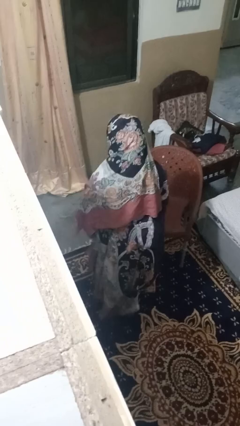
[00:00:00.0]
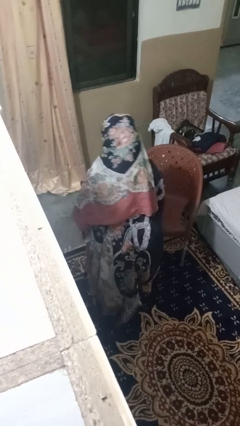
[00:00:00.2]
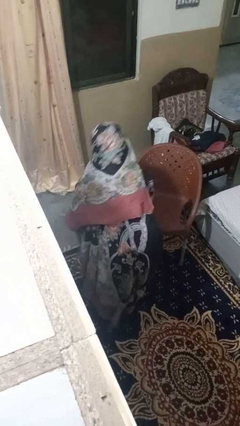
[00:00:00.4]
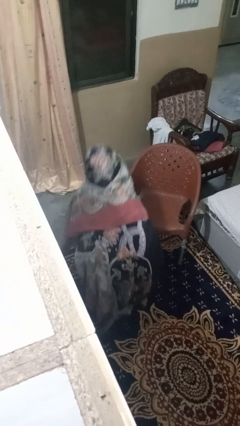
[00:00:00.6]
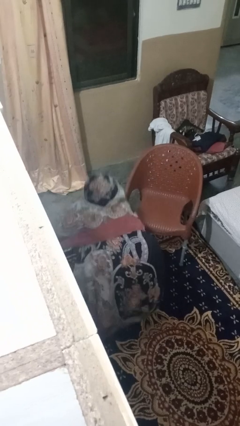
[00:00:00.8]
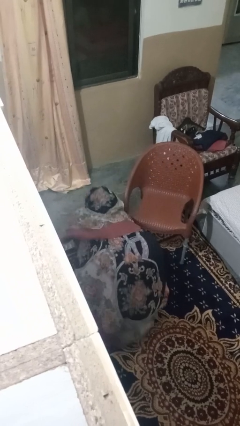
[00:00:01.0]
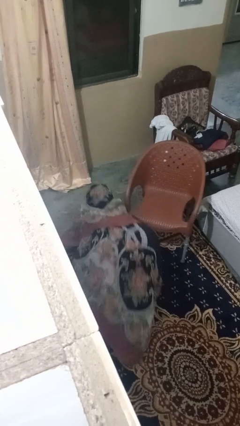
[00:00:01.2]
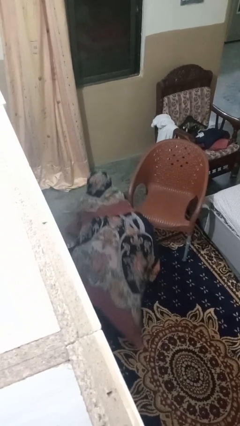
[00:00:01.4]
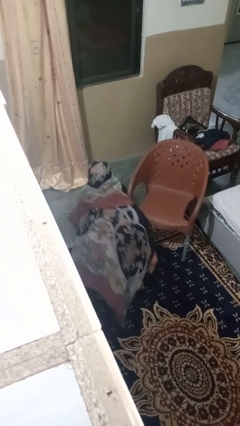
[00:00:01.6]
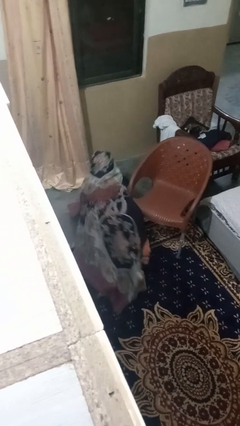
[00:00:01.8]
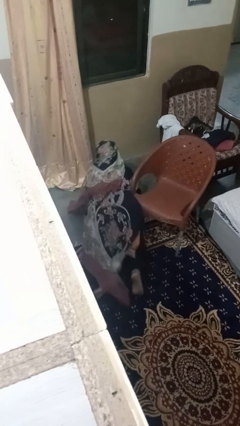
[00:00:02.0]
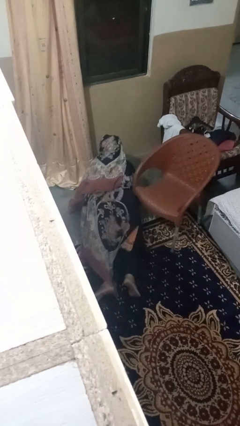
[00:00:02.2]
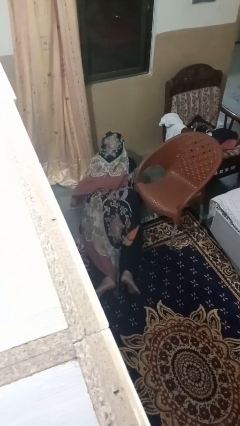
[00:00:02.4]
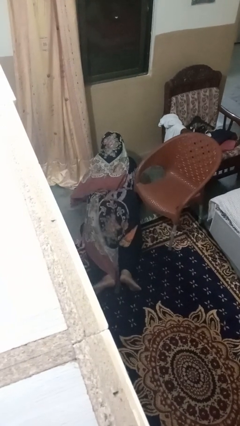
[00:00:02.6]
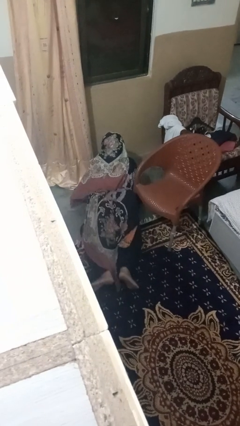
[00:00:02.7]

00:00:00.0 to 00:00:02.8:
person lies down on floor

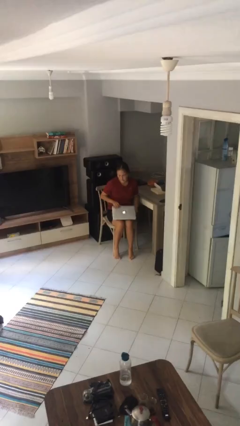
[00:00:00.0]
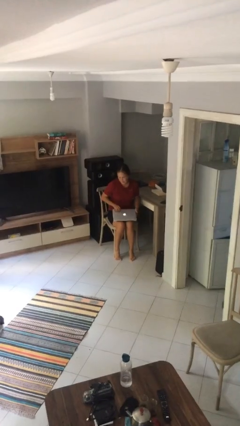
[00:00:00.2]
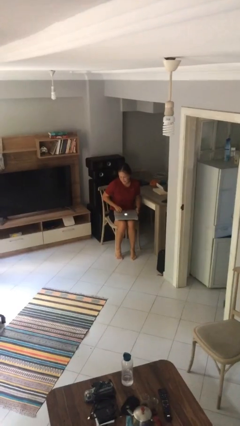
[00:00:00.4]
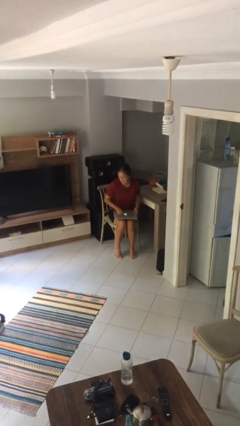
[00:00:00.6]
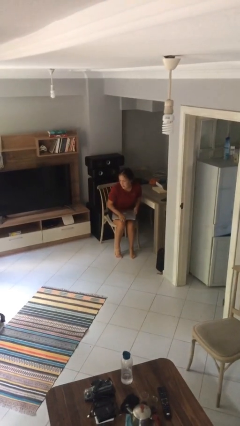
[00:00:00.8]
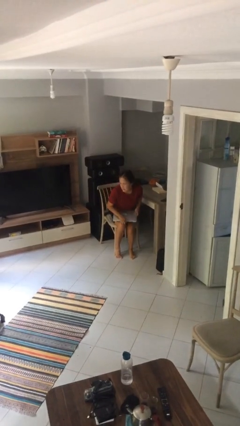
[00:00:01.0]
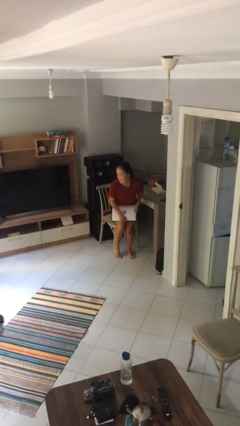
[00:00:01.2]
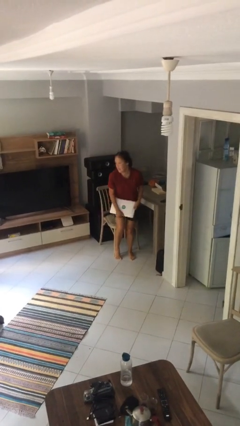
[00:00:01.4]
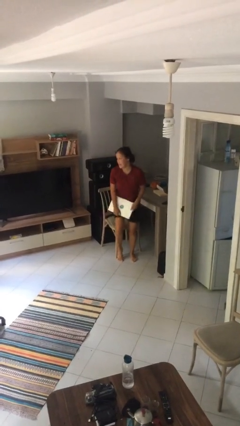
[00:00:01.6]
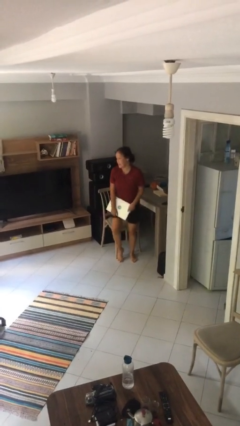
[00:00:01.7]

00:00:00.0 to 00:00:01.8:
person stands up

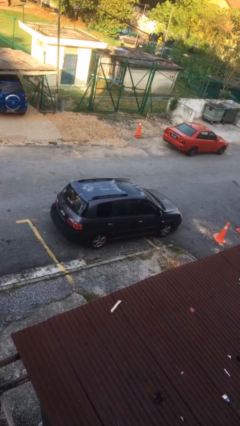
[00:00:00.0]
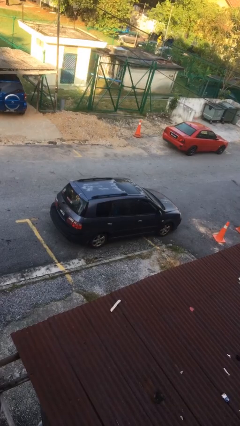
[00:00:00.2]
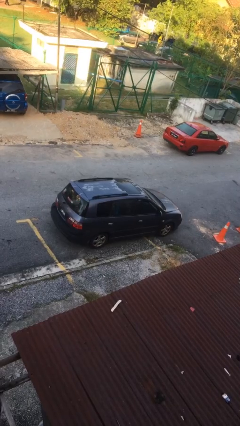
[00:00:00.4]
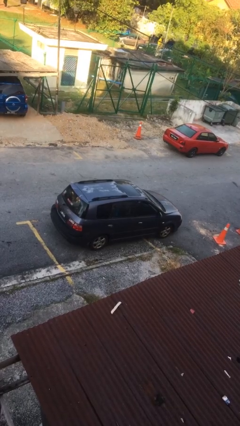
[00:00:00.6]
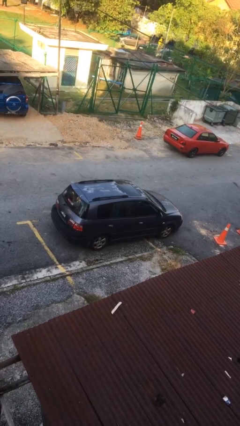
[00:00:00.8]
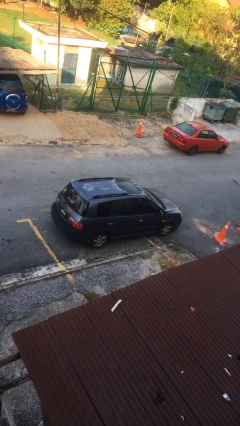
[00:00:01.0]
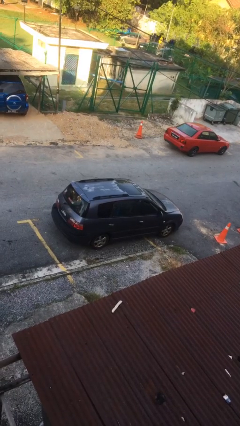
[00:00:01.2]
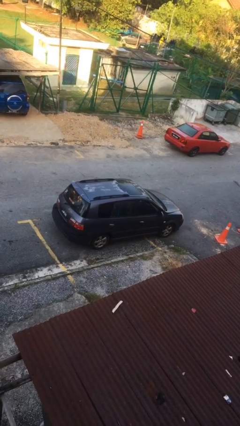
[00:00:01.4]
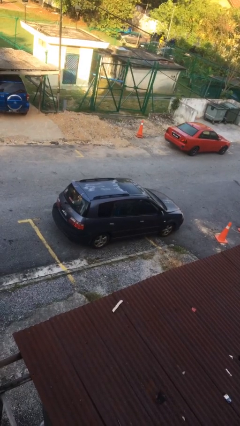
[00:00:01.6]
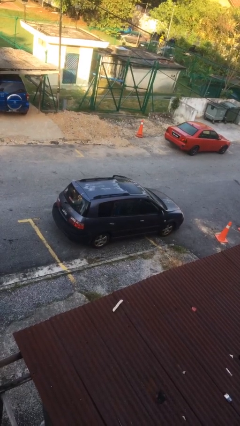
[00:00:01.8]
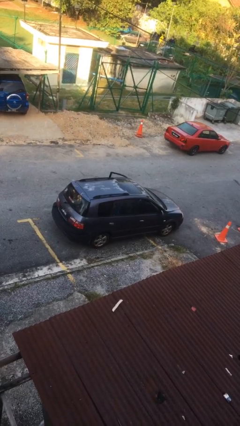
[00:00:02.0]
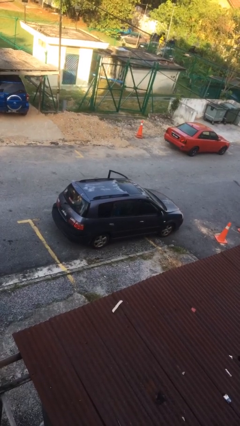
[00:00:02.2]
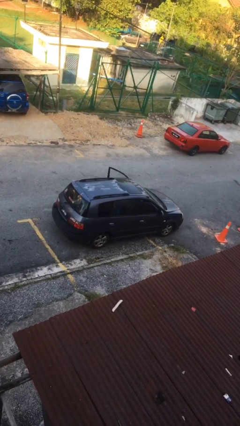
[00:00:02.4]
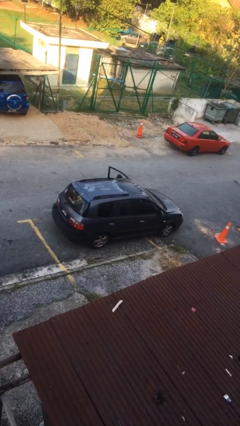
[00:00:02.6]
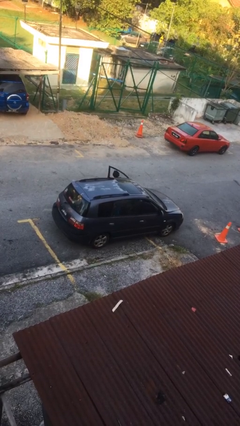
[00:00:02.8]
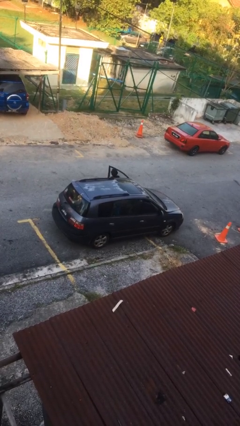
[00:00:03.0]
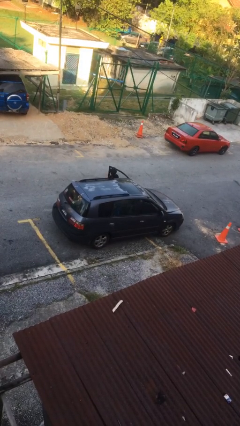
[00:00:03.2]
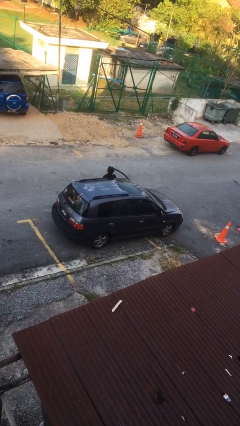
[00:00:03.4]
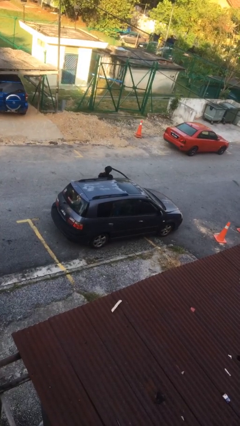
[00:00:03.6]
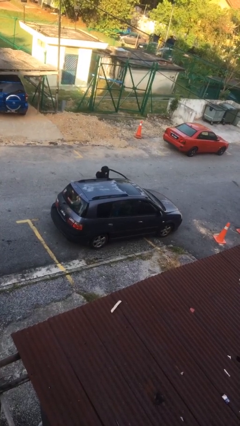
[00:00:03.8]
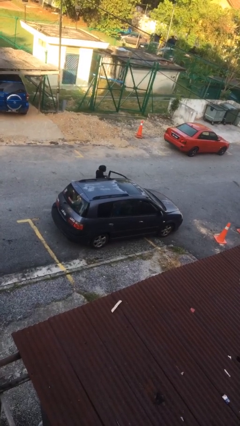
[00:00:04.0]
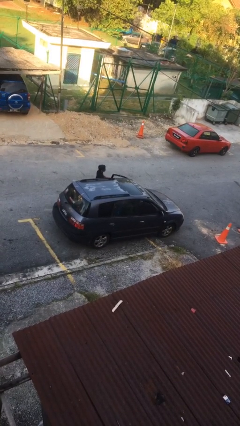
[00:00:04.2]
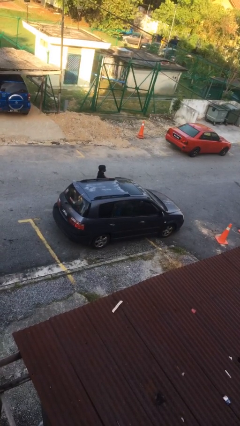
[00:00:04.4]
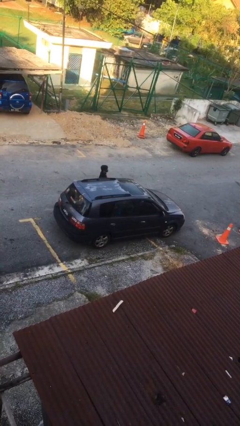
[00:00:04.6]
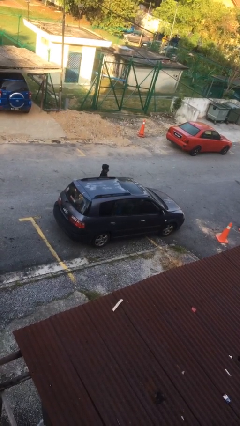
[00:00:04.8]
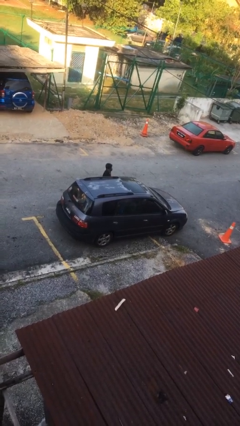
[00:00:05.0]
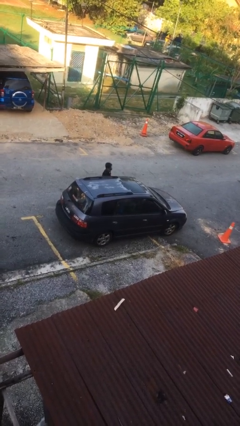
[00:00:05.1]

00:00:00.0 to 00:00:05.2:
car drops off person

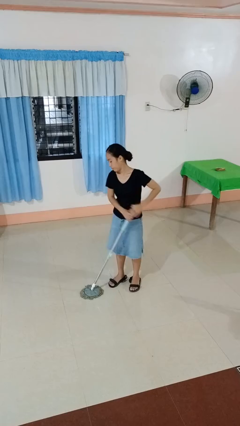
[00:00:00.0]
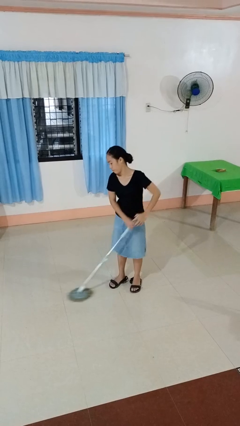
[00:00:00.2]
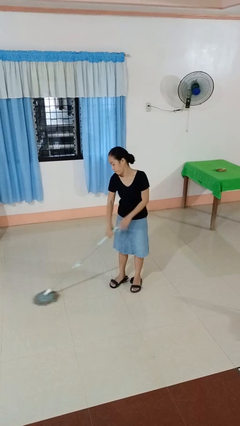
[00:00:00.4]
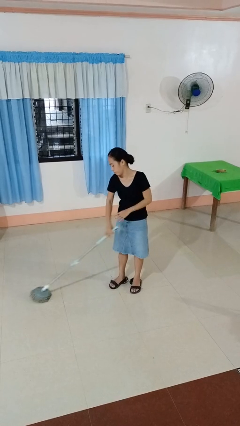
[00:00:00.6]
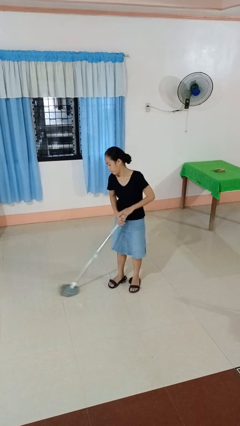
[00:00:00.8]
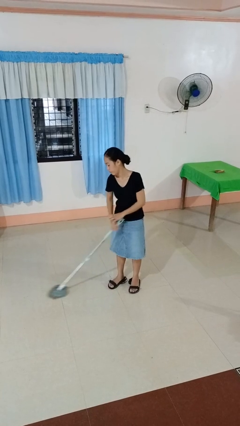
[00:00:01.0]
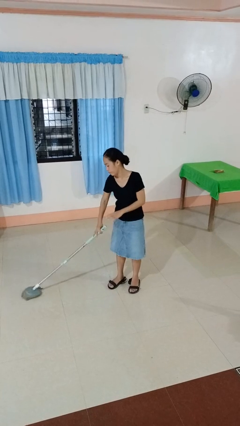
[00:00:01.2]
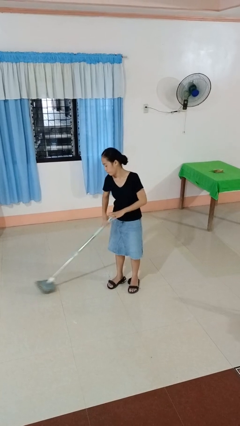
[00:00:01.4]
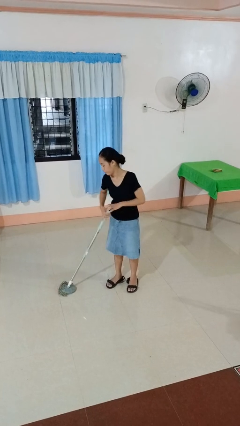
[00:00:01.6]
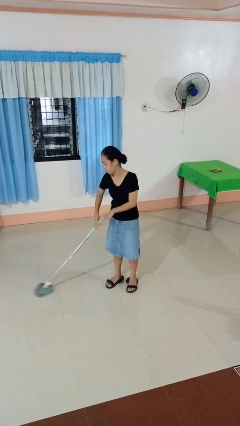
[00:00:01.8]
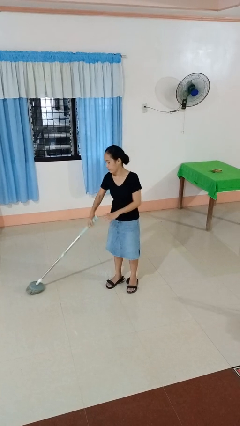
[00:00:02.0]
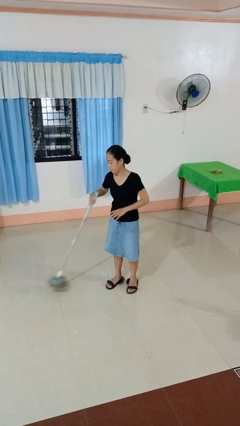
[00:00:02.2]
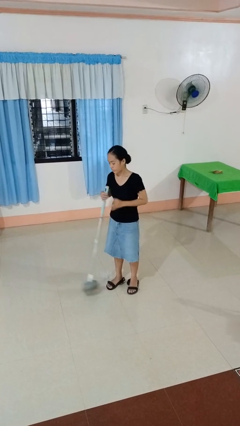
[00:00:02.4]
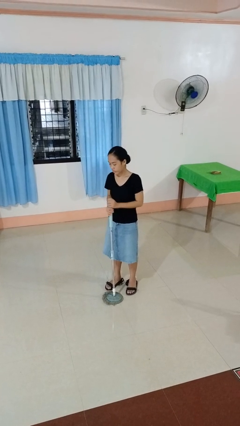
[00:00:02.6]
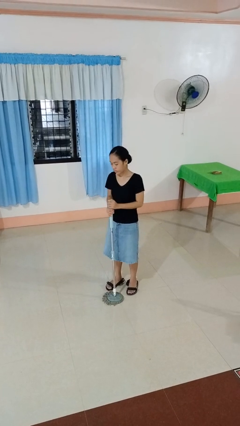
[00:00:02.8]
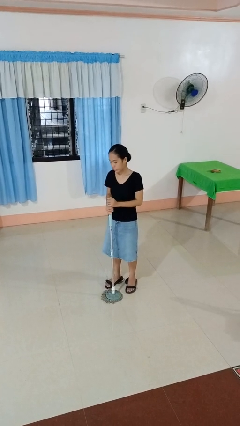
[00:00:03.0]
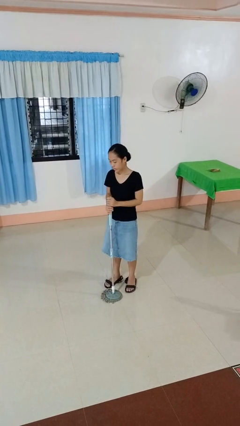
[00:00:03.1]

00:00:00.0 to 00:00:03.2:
person mops

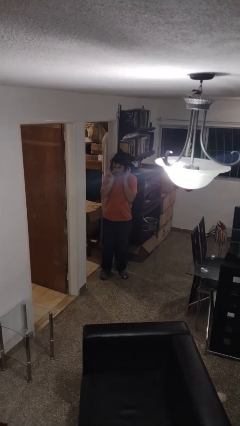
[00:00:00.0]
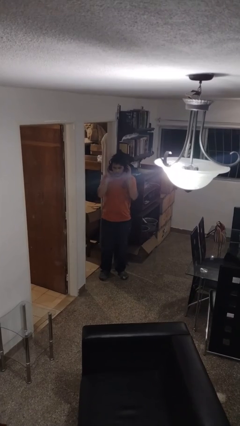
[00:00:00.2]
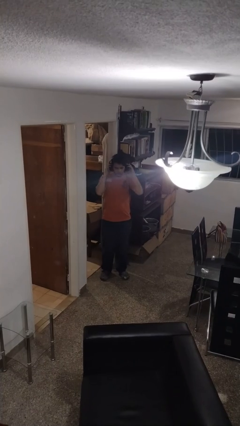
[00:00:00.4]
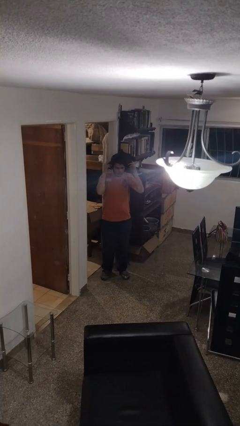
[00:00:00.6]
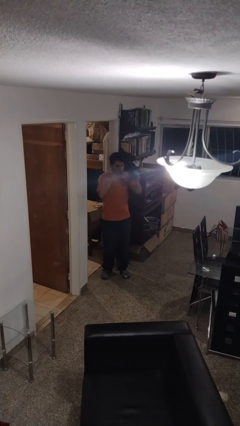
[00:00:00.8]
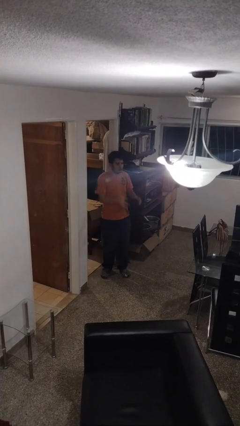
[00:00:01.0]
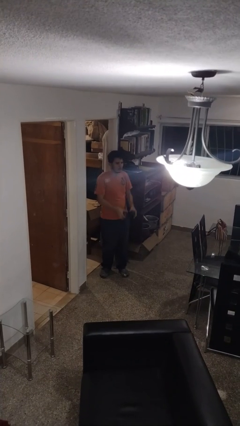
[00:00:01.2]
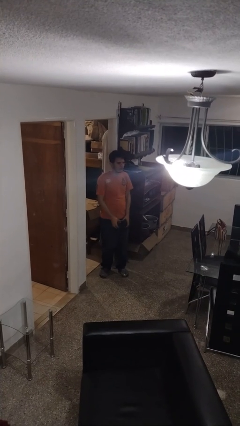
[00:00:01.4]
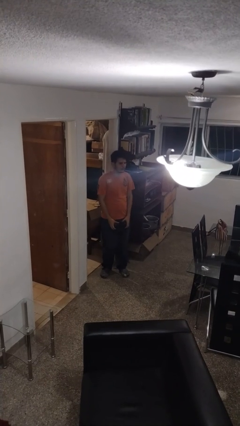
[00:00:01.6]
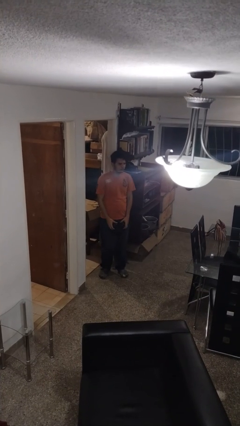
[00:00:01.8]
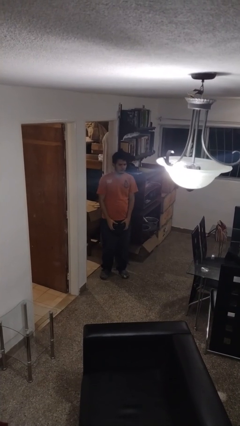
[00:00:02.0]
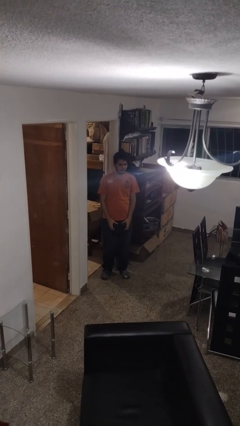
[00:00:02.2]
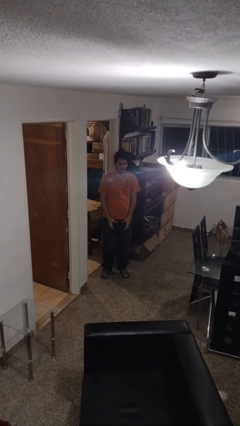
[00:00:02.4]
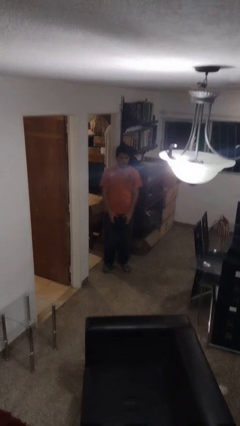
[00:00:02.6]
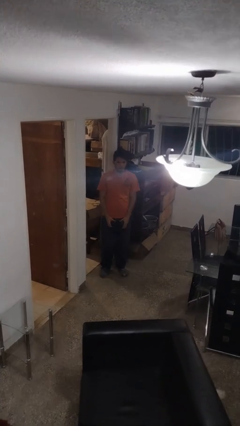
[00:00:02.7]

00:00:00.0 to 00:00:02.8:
person takes off headphones

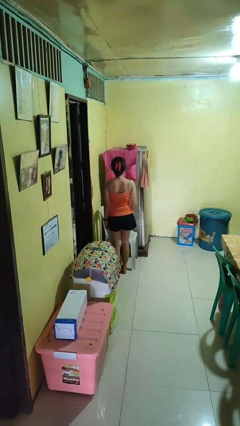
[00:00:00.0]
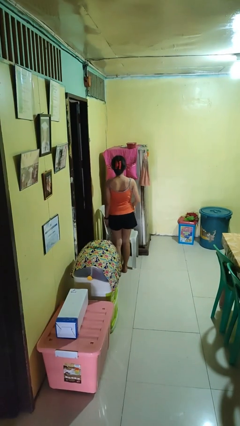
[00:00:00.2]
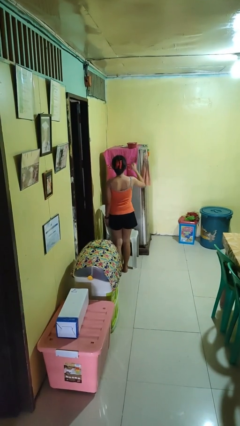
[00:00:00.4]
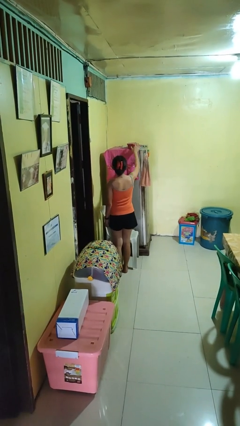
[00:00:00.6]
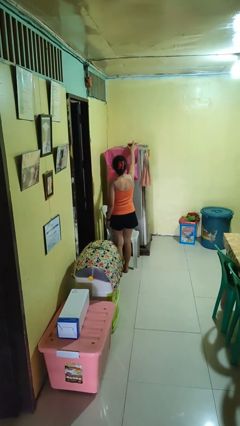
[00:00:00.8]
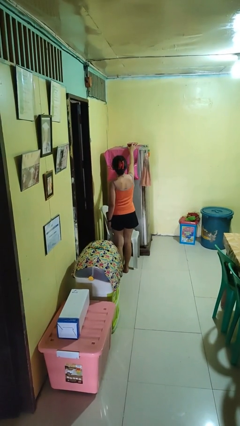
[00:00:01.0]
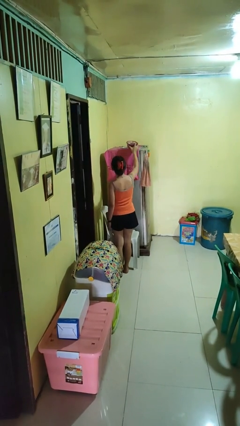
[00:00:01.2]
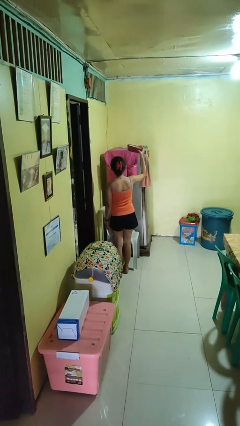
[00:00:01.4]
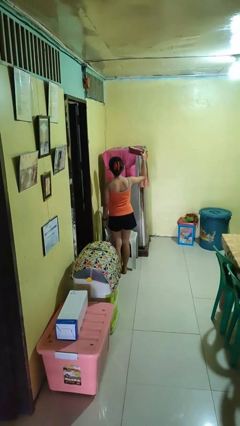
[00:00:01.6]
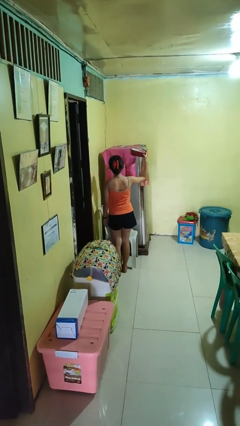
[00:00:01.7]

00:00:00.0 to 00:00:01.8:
person picks up object from shelf
